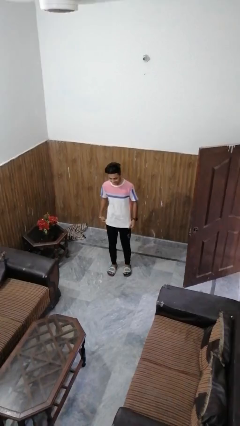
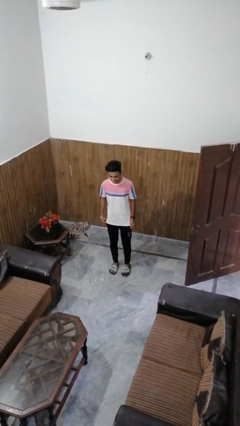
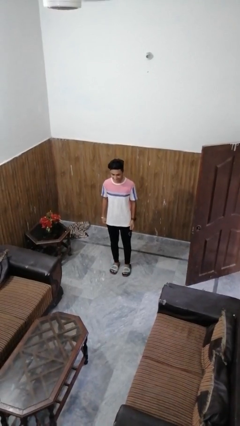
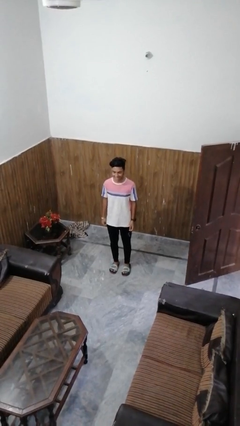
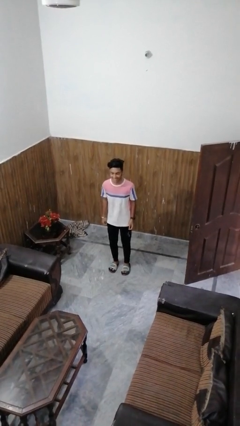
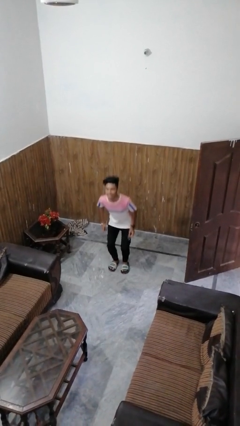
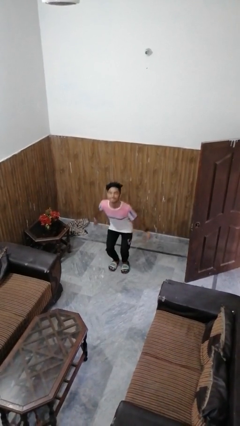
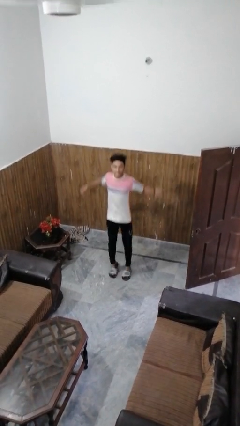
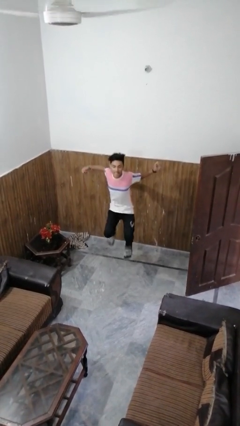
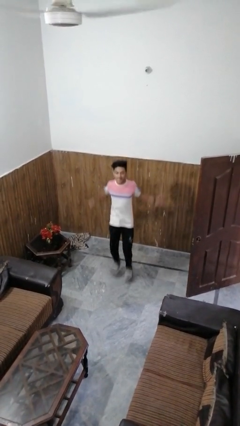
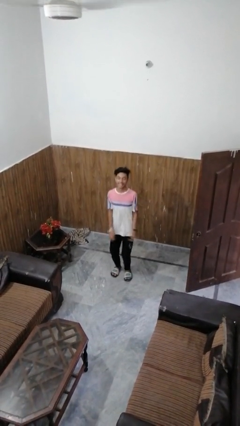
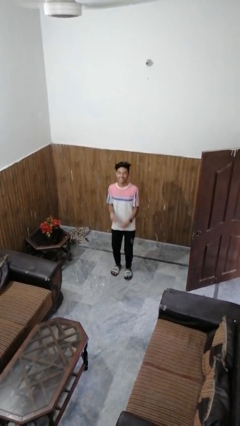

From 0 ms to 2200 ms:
person jumps

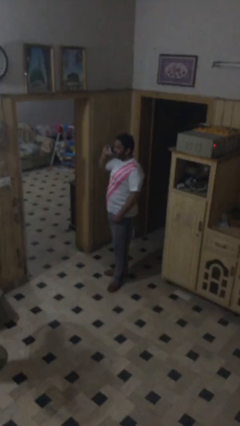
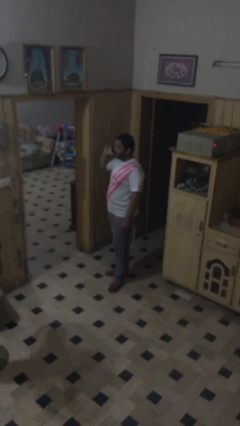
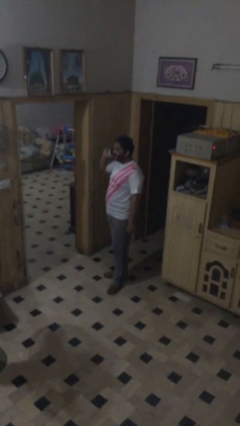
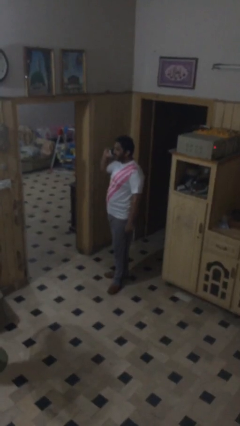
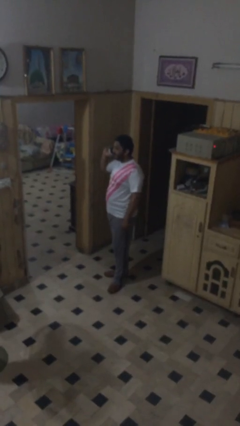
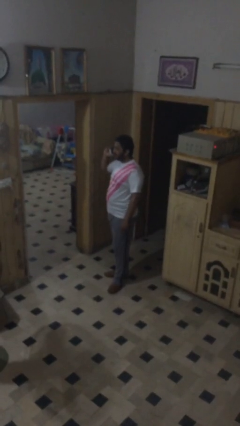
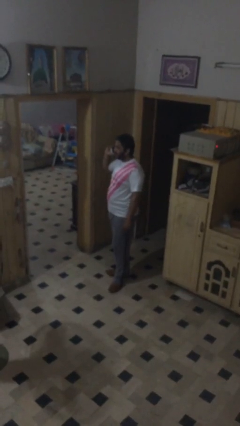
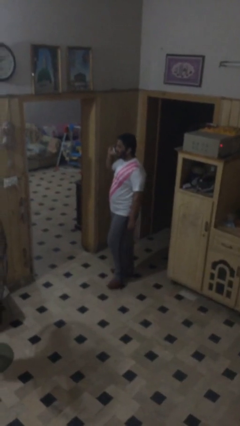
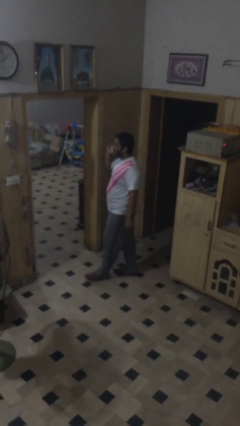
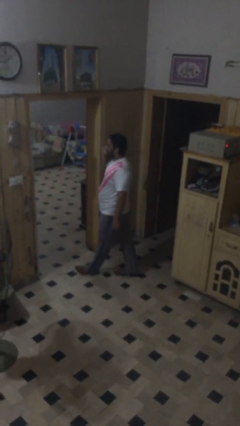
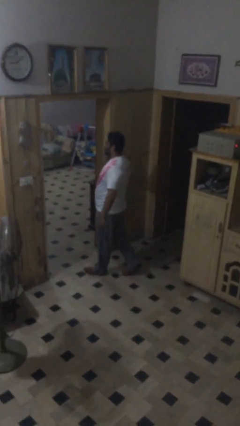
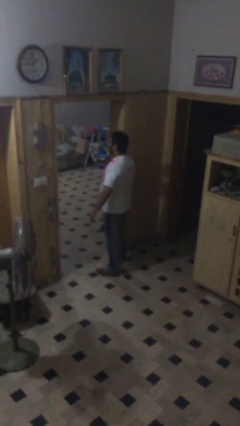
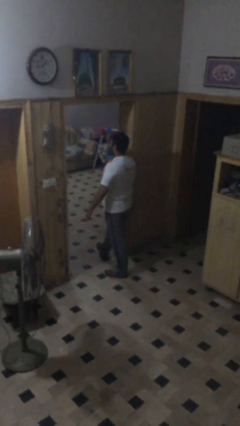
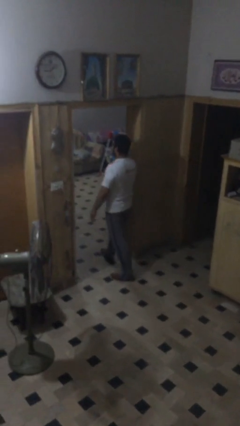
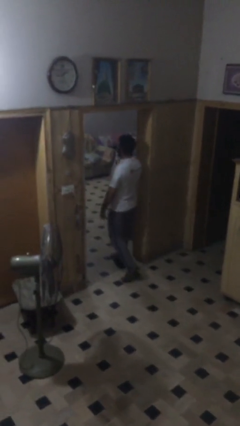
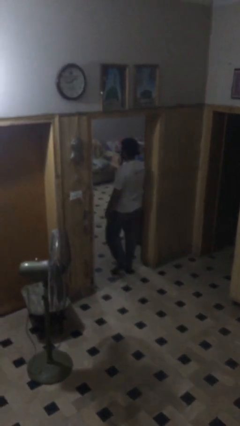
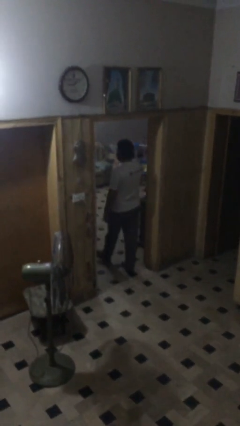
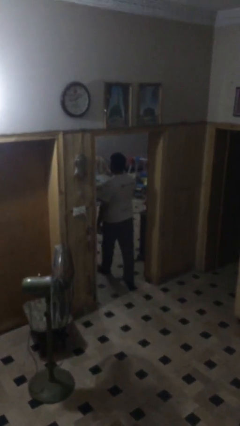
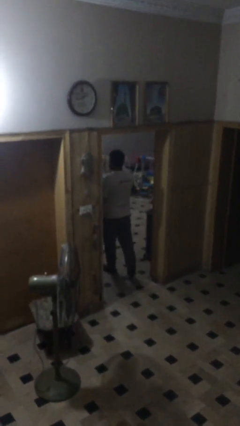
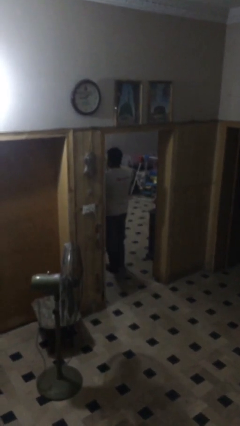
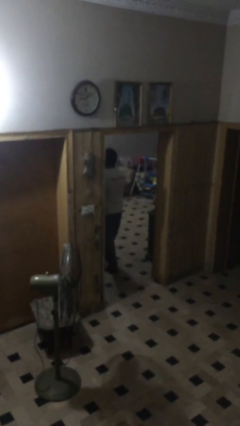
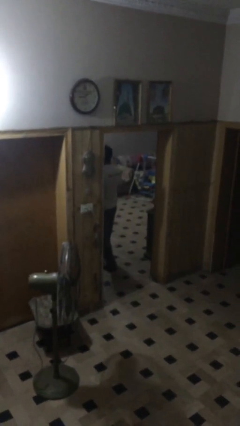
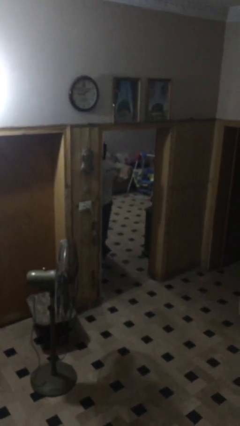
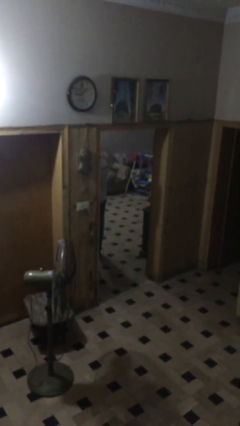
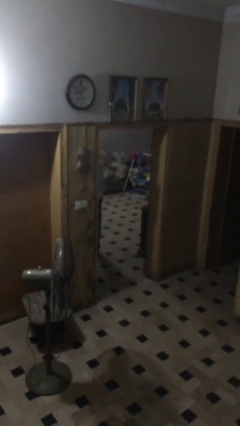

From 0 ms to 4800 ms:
person exits scene through structure

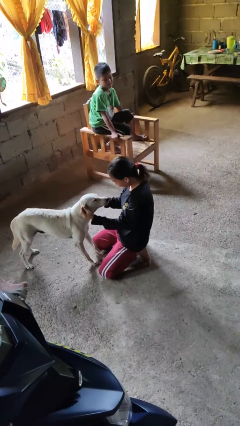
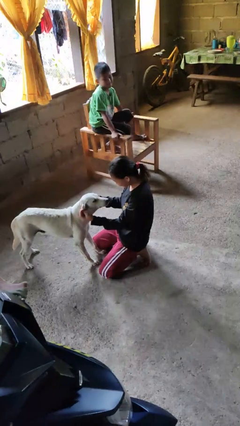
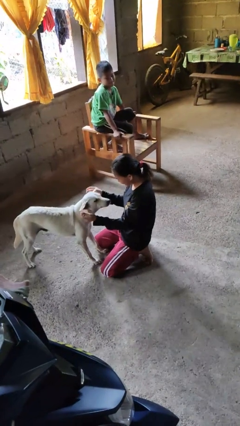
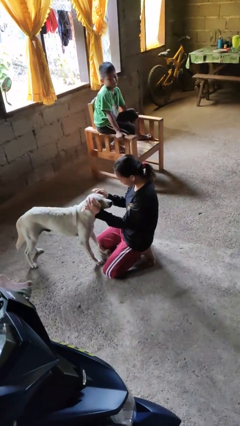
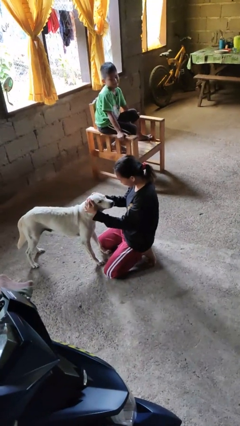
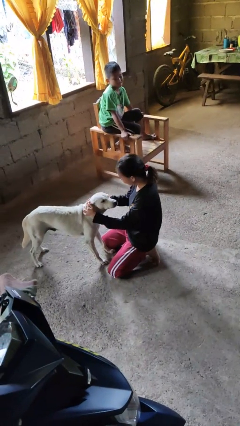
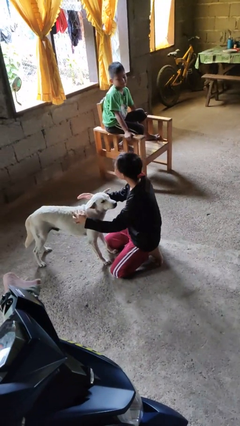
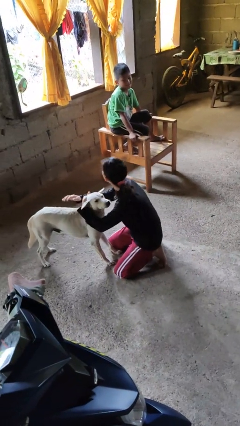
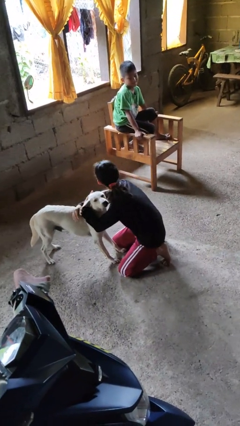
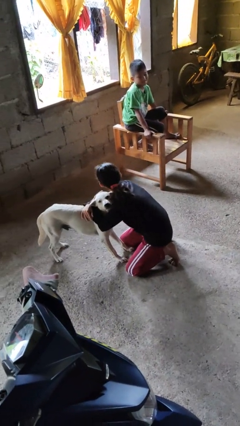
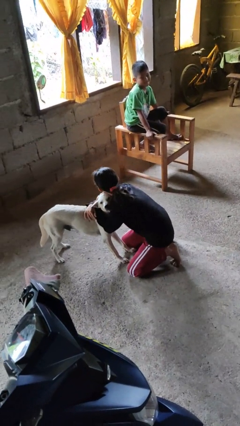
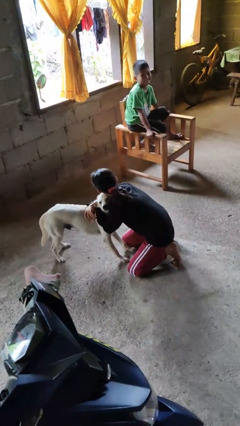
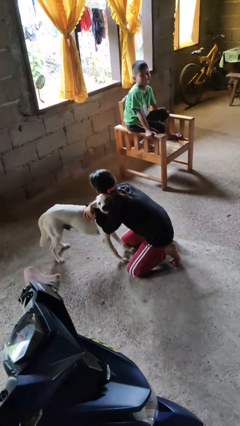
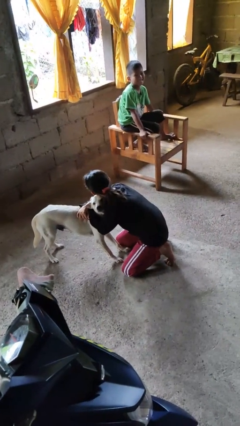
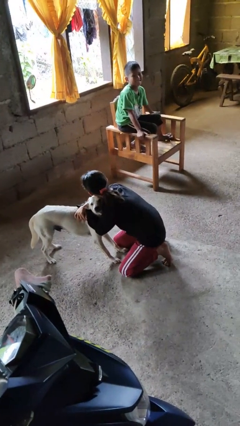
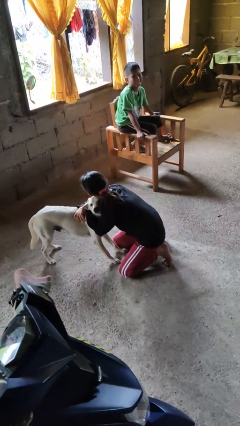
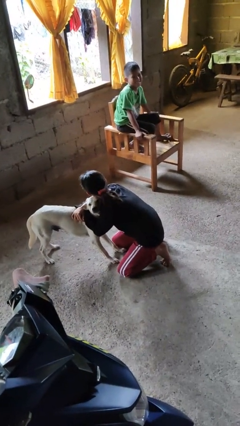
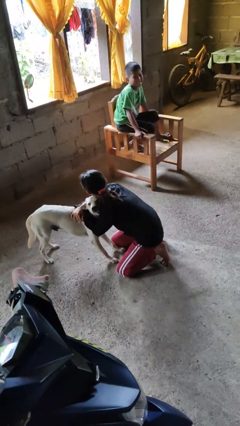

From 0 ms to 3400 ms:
person hugs dog

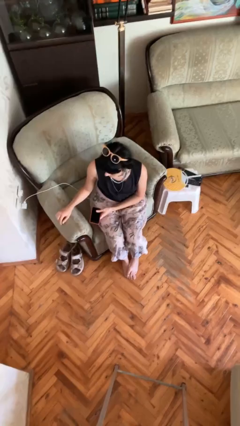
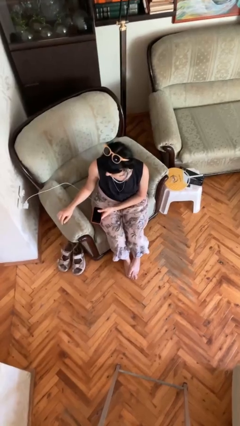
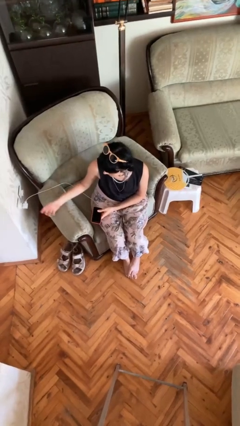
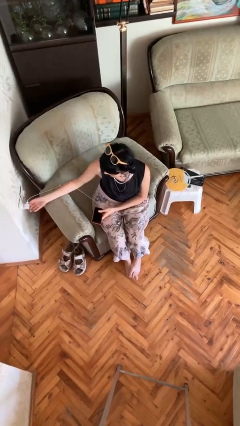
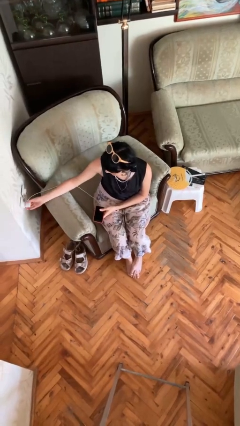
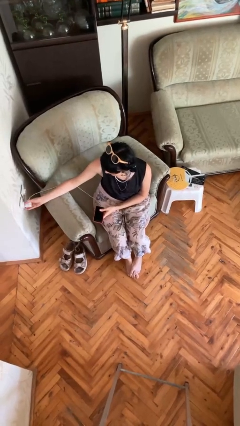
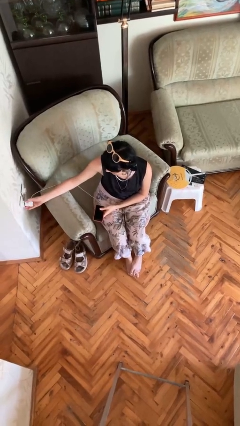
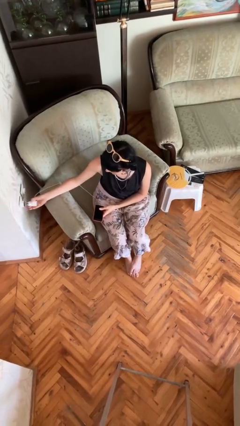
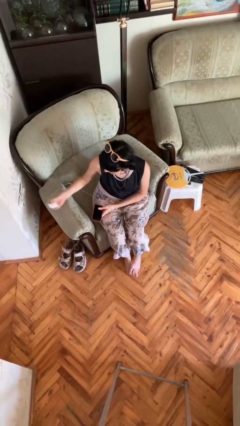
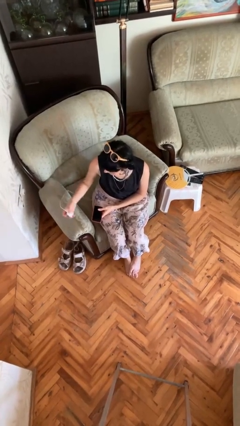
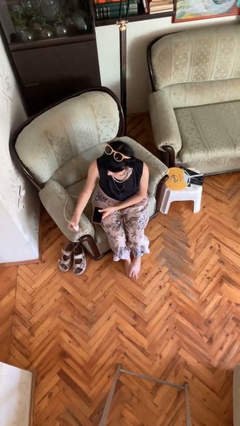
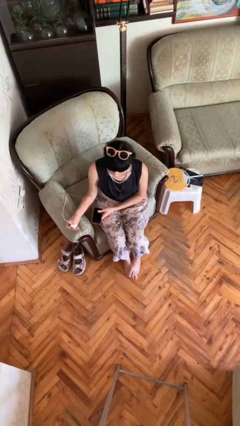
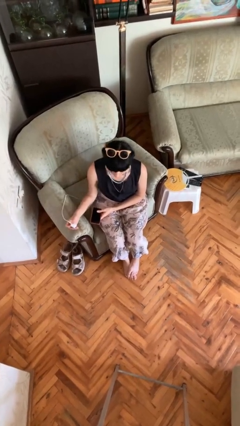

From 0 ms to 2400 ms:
person unplugs from electrical socket

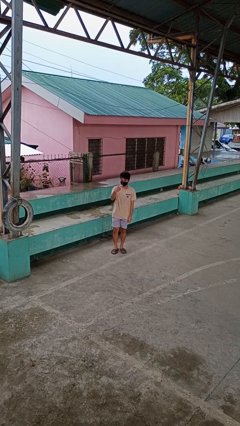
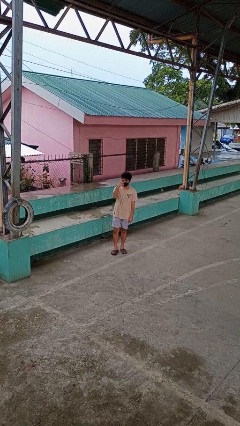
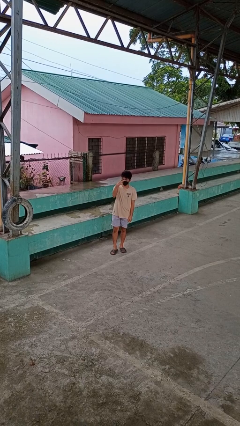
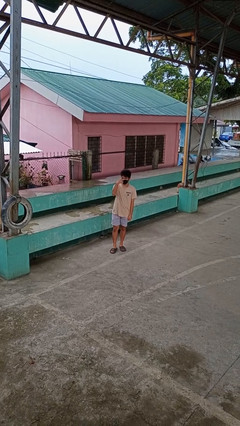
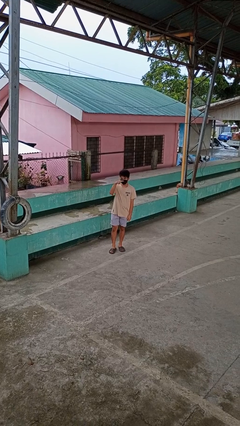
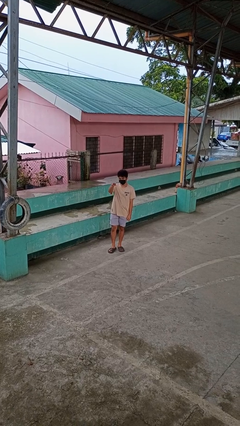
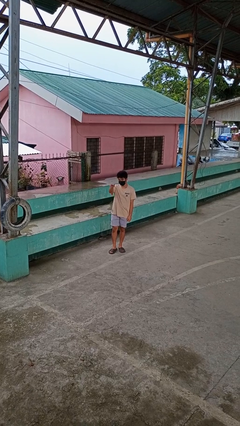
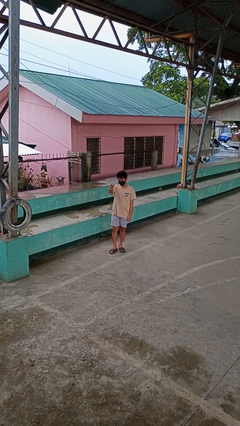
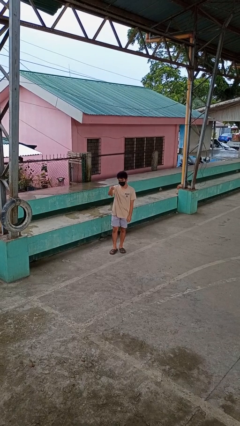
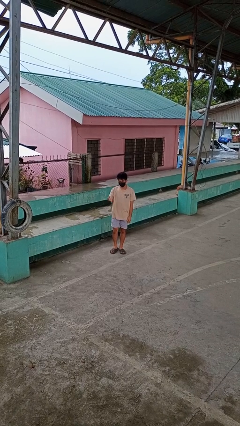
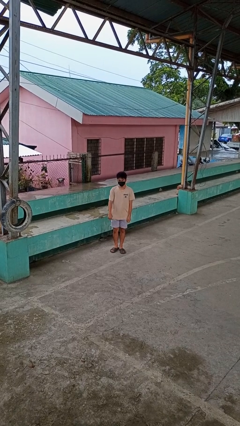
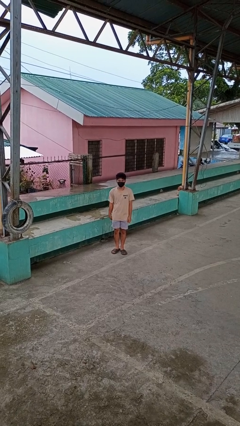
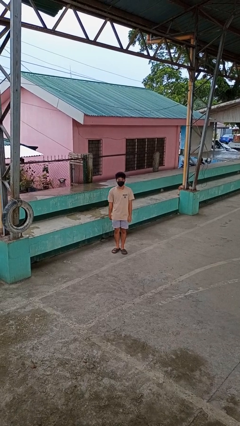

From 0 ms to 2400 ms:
person gestures watch closely

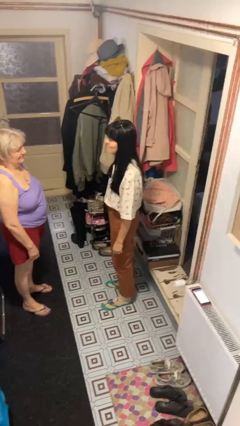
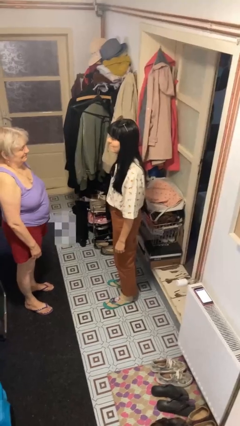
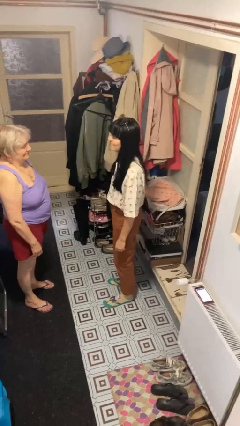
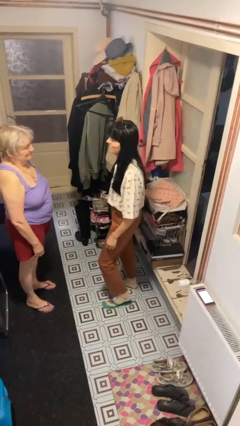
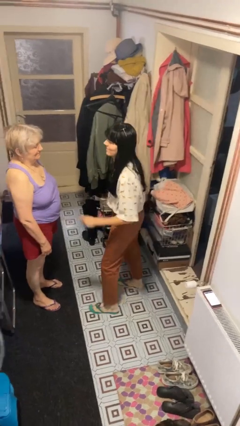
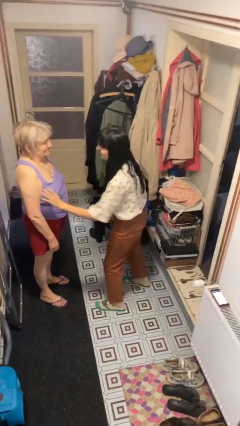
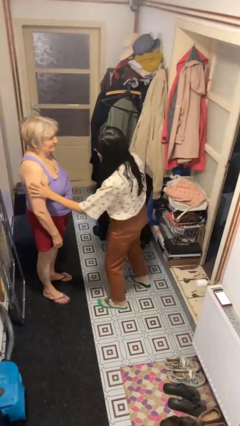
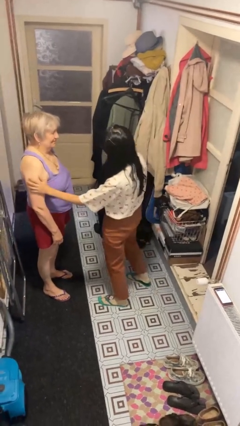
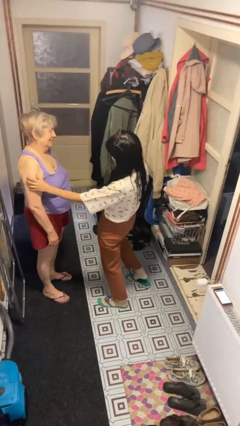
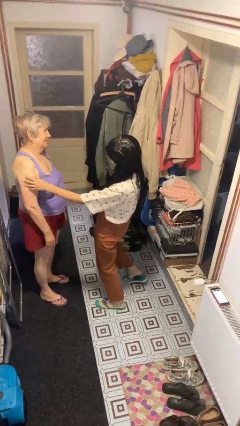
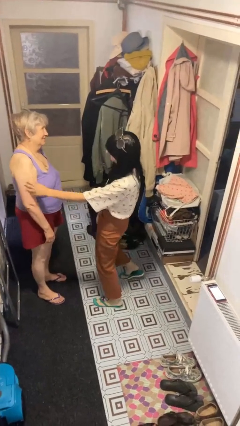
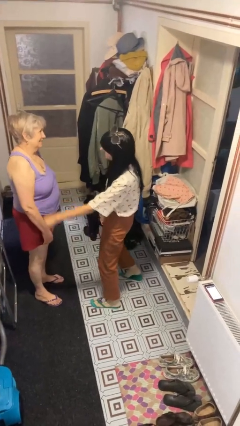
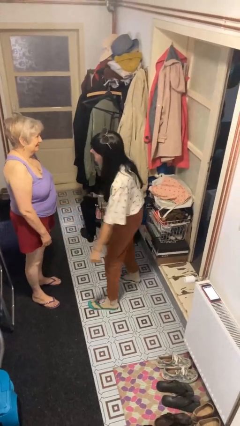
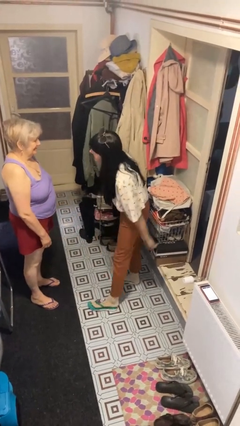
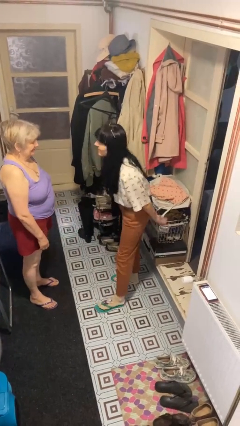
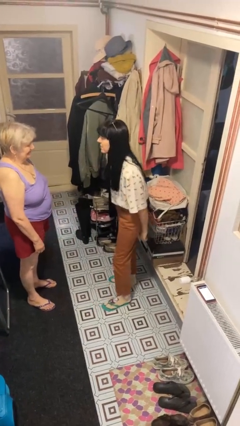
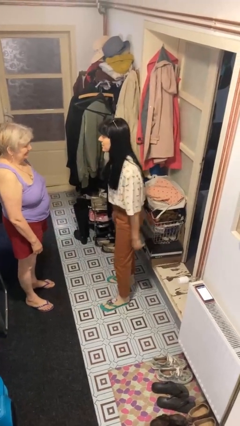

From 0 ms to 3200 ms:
person shoves person
